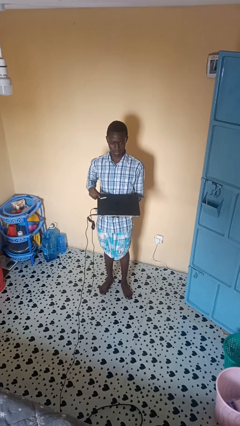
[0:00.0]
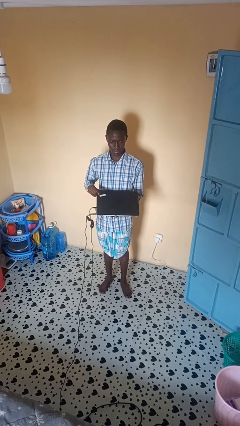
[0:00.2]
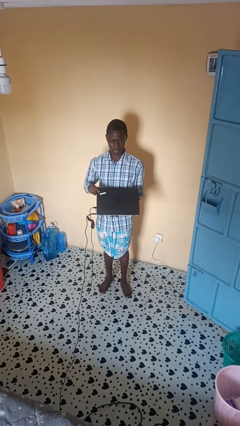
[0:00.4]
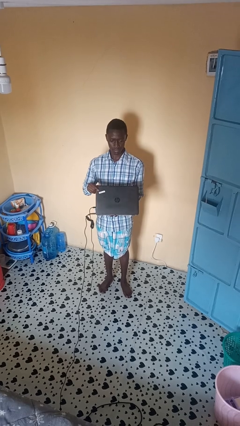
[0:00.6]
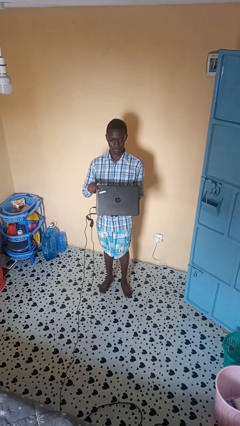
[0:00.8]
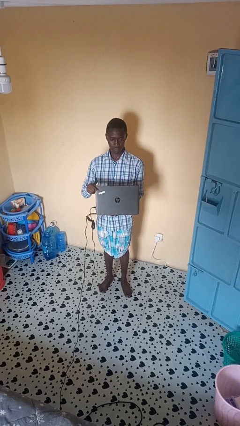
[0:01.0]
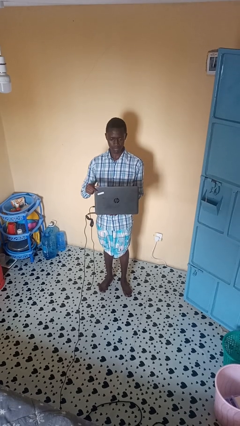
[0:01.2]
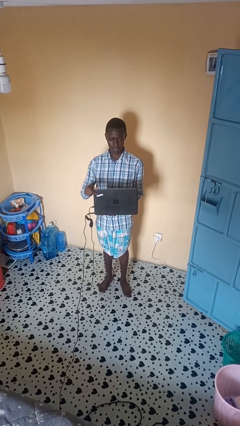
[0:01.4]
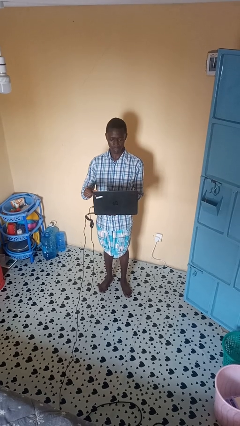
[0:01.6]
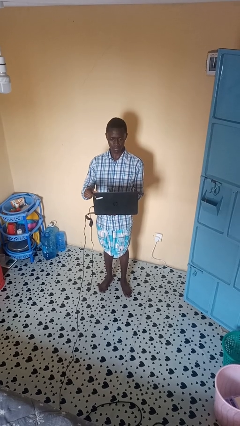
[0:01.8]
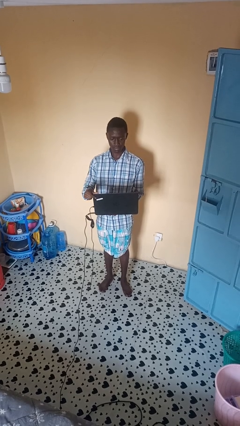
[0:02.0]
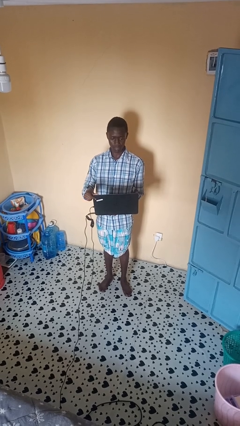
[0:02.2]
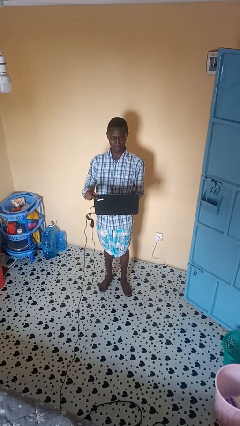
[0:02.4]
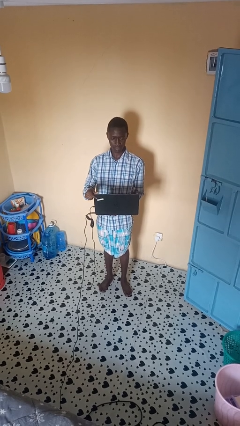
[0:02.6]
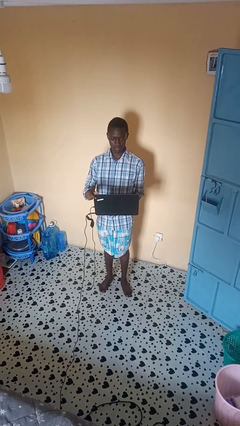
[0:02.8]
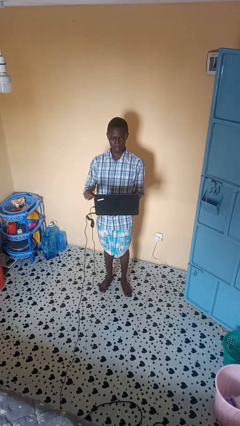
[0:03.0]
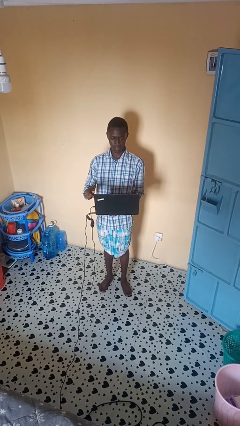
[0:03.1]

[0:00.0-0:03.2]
person opens laptop

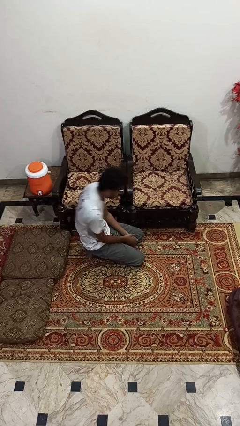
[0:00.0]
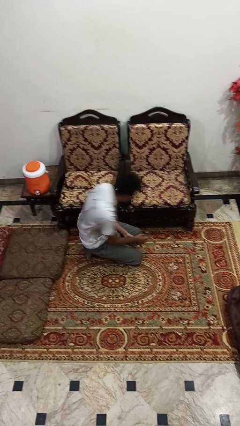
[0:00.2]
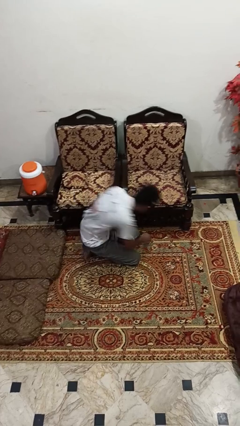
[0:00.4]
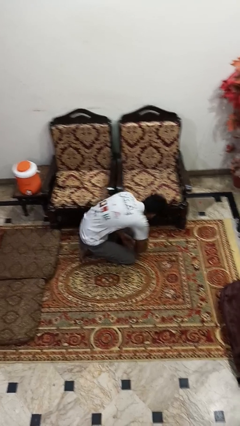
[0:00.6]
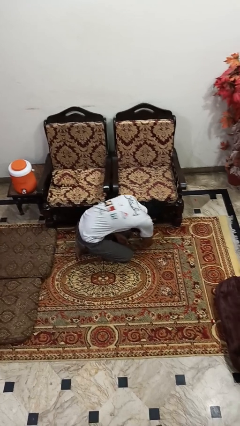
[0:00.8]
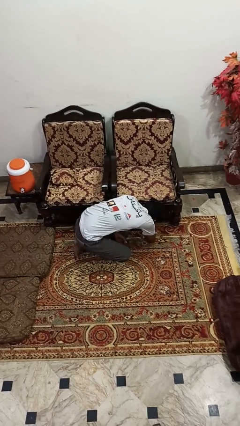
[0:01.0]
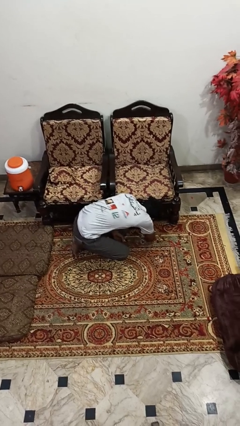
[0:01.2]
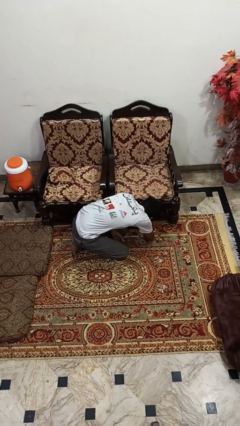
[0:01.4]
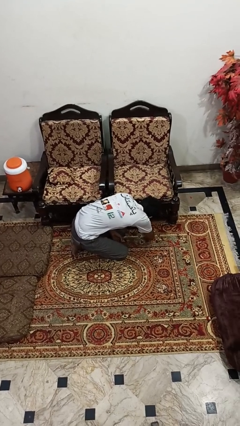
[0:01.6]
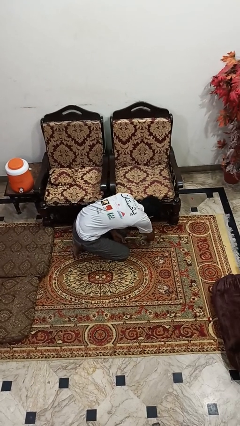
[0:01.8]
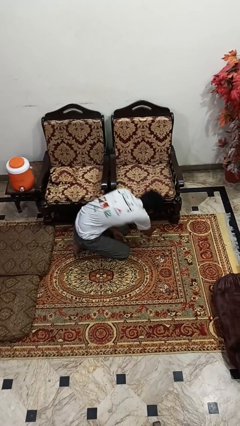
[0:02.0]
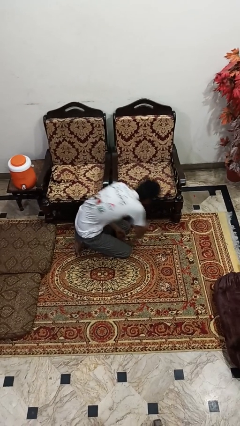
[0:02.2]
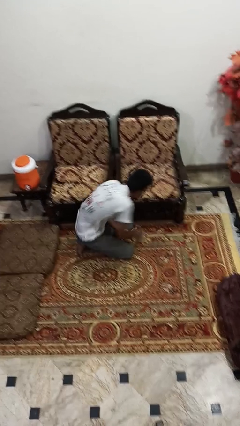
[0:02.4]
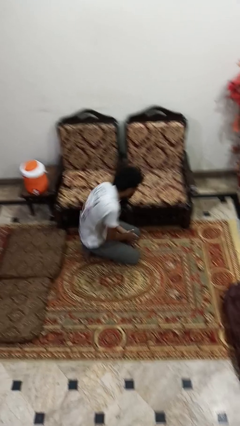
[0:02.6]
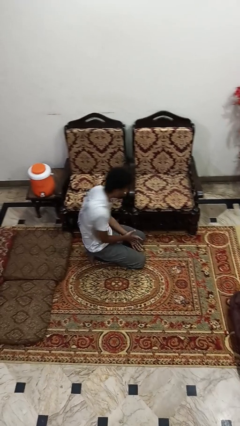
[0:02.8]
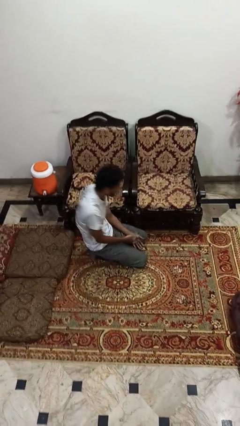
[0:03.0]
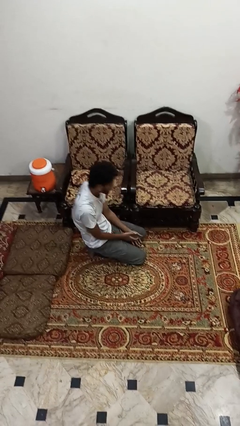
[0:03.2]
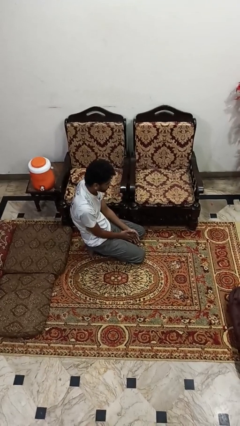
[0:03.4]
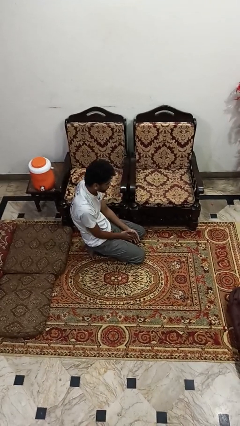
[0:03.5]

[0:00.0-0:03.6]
person searches under couch

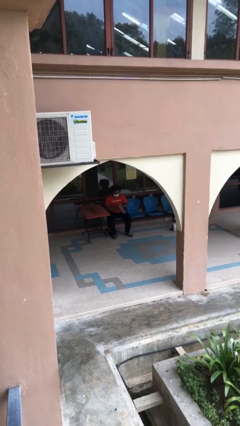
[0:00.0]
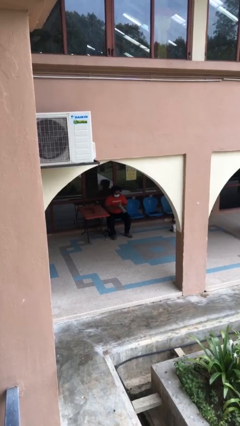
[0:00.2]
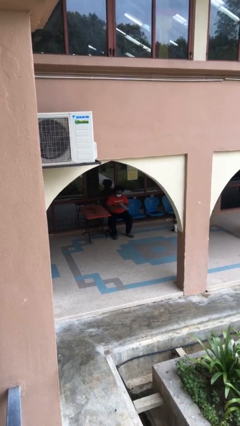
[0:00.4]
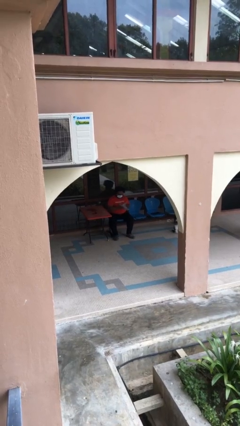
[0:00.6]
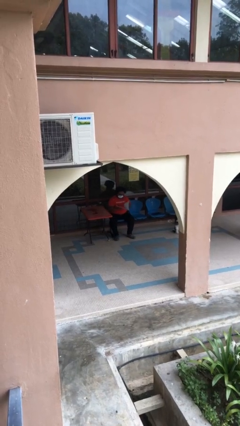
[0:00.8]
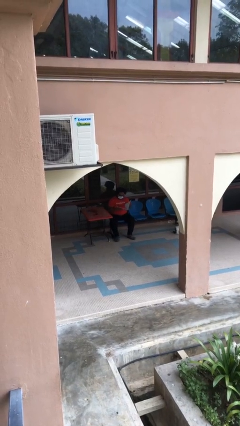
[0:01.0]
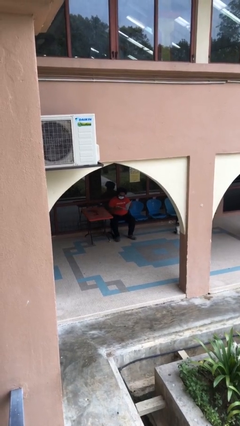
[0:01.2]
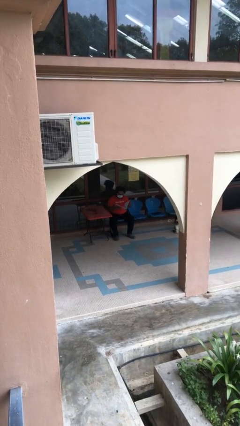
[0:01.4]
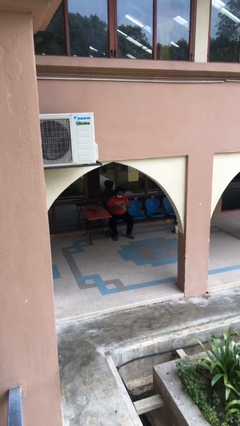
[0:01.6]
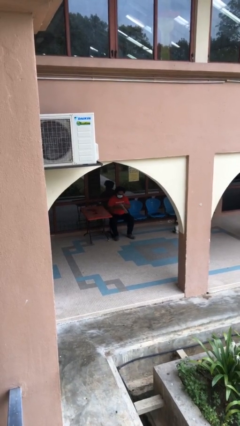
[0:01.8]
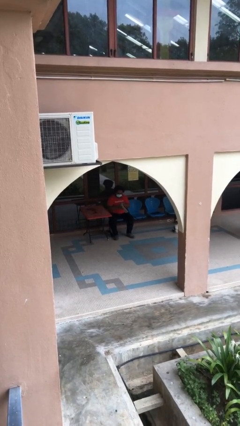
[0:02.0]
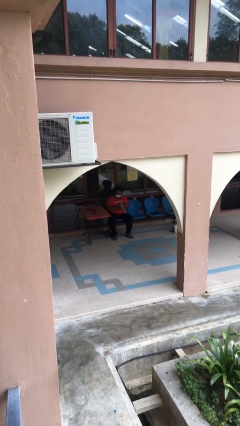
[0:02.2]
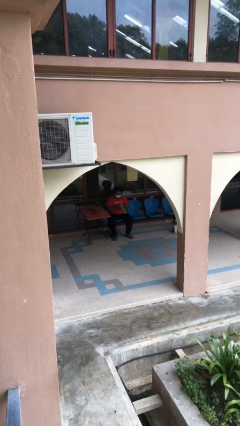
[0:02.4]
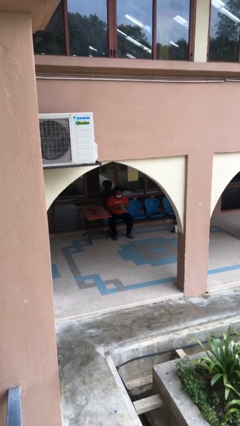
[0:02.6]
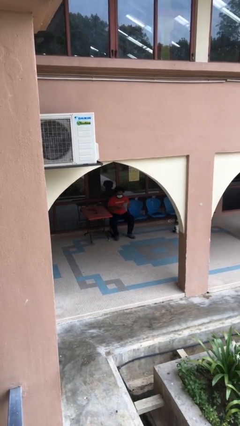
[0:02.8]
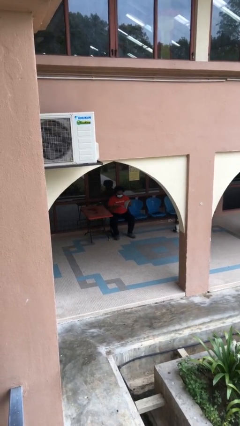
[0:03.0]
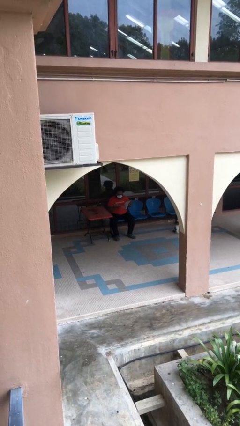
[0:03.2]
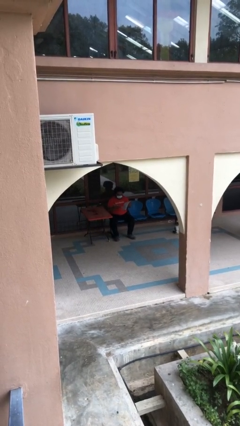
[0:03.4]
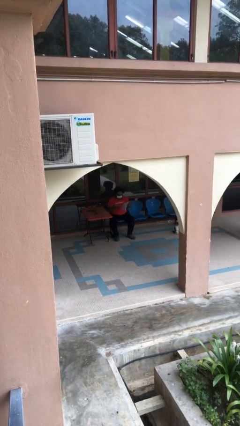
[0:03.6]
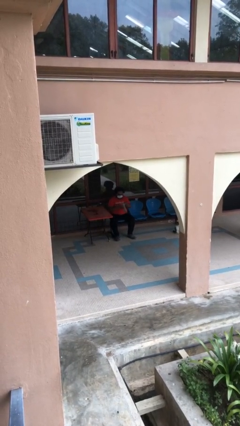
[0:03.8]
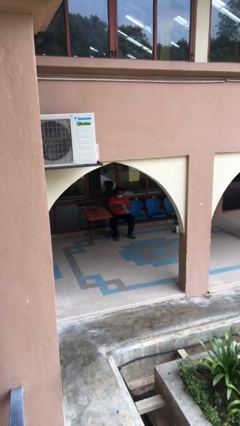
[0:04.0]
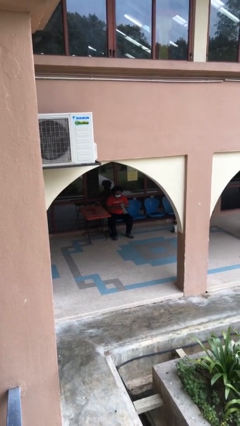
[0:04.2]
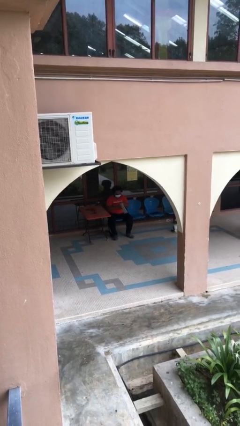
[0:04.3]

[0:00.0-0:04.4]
person reads document

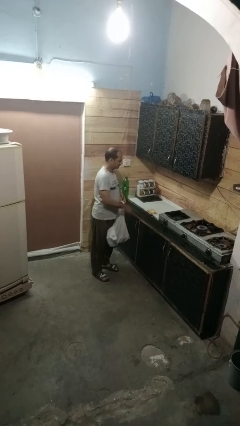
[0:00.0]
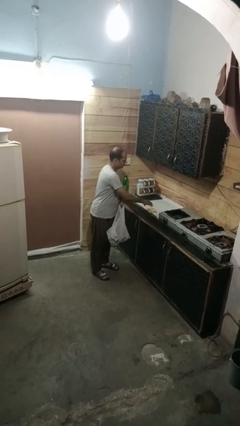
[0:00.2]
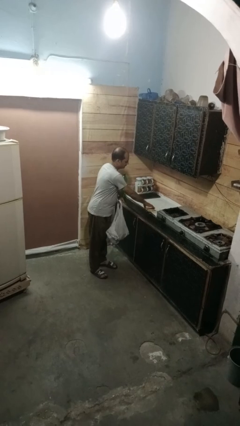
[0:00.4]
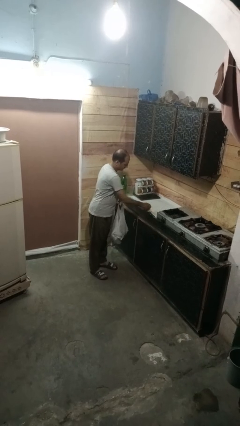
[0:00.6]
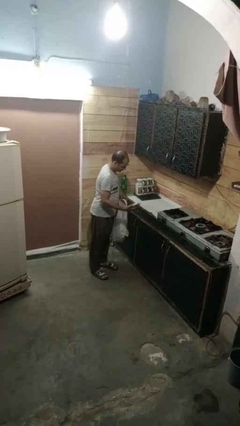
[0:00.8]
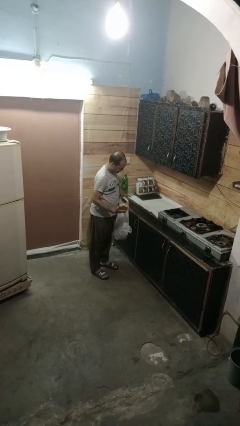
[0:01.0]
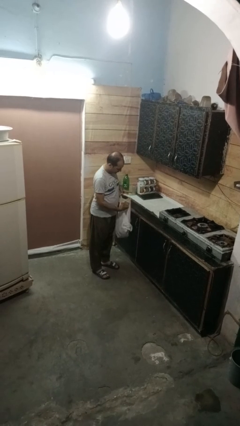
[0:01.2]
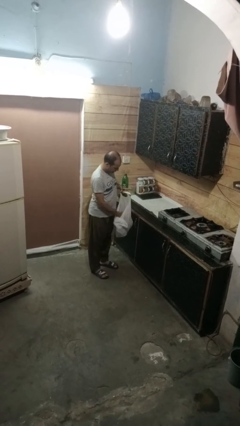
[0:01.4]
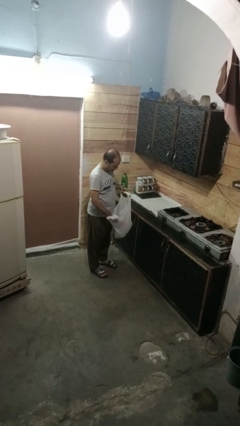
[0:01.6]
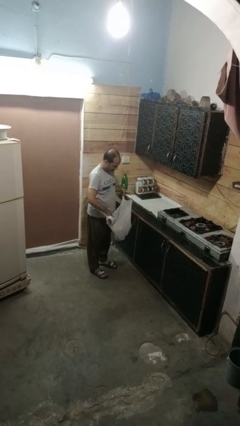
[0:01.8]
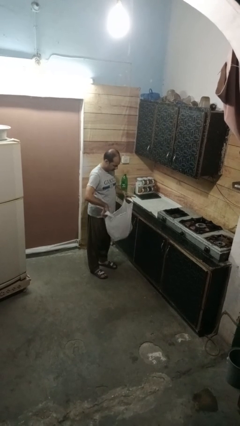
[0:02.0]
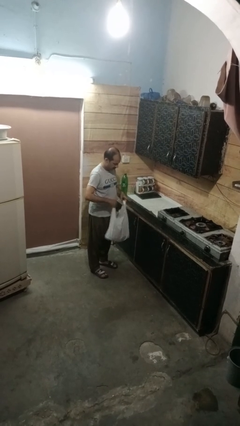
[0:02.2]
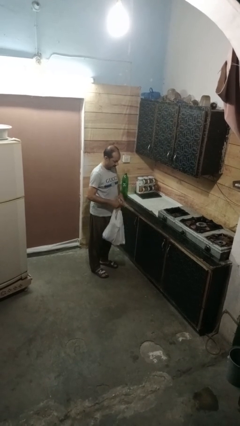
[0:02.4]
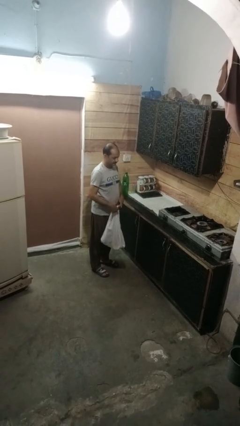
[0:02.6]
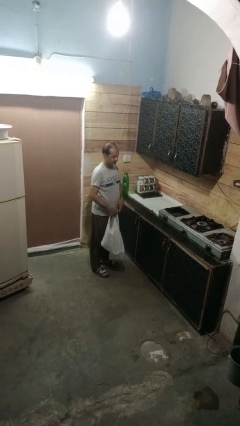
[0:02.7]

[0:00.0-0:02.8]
person puts object into bag

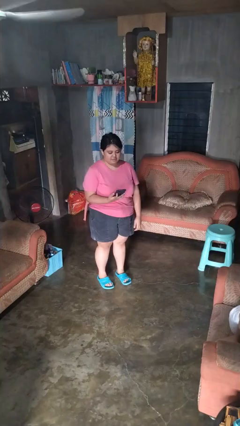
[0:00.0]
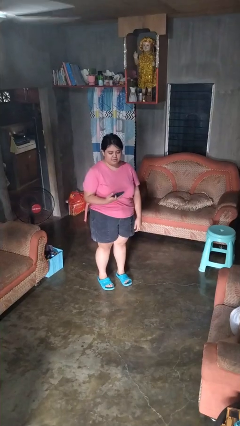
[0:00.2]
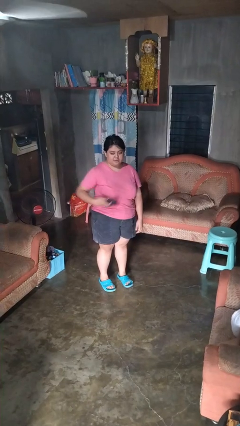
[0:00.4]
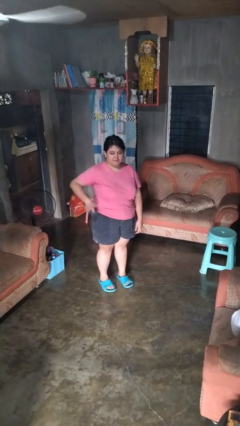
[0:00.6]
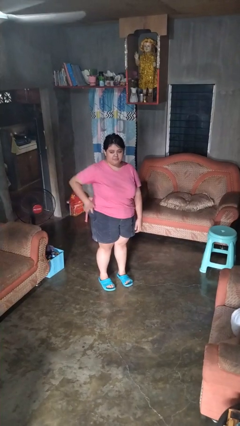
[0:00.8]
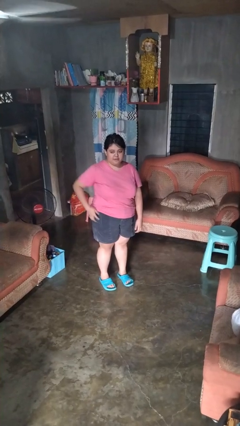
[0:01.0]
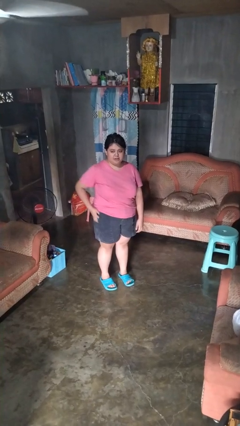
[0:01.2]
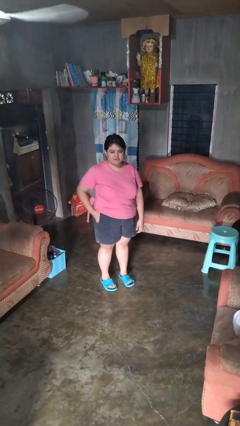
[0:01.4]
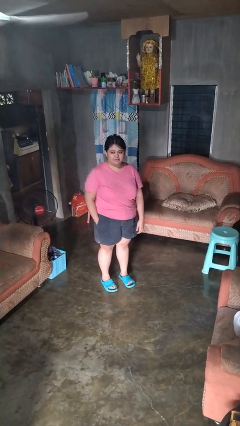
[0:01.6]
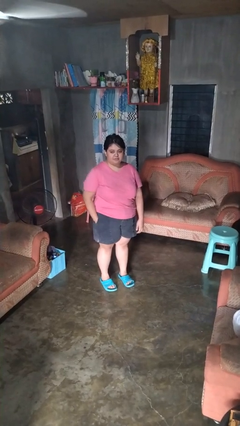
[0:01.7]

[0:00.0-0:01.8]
person puts phone into pocket

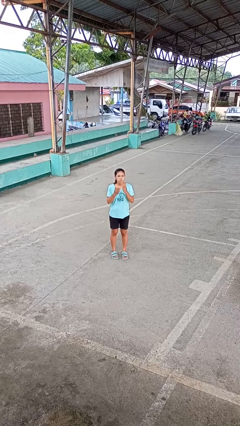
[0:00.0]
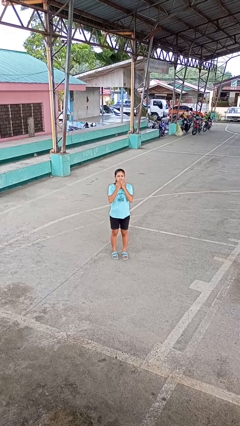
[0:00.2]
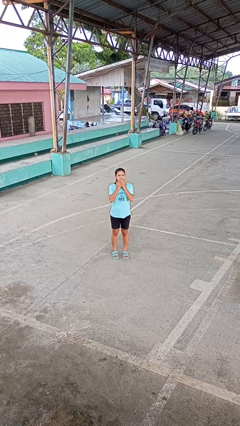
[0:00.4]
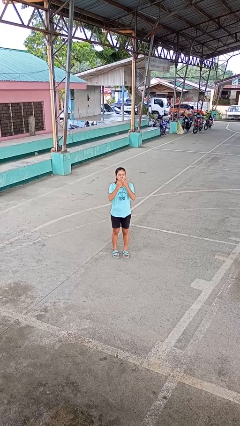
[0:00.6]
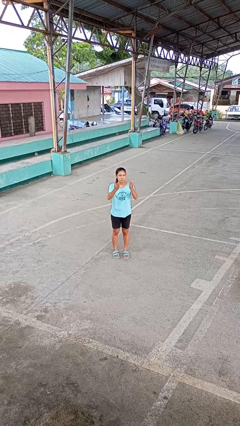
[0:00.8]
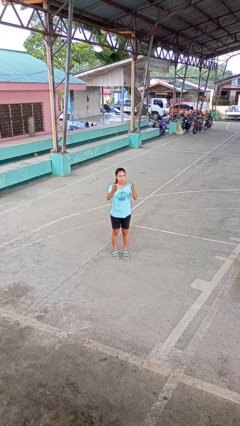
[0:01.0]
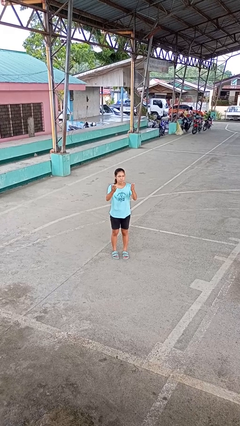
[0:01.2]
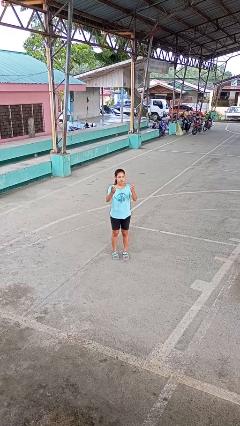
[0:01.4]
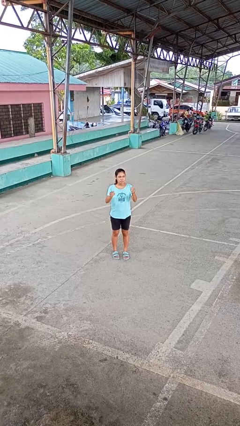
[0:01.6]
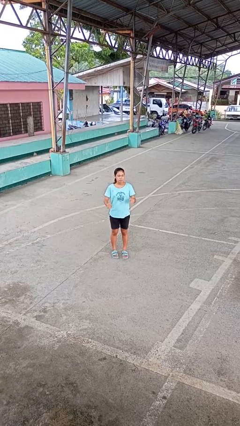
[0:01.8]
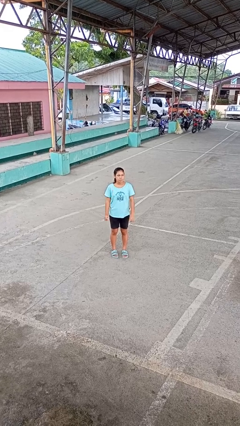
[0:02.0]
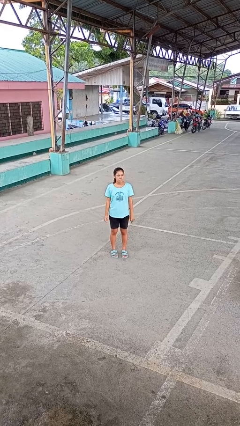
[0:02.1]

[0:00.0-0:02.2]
person gestures blow kiss
